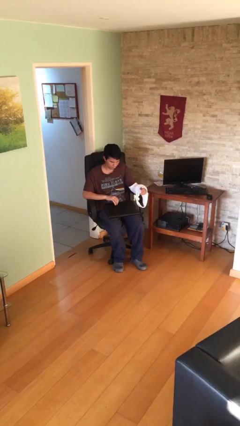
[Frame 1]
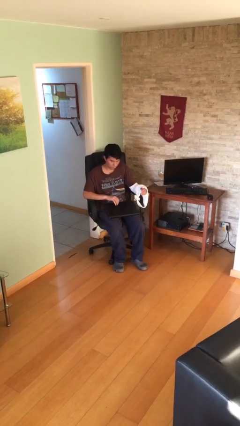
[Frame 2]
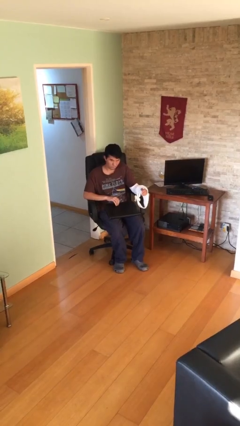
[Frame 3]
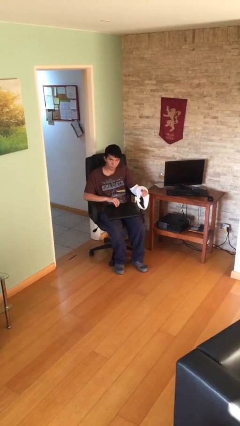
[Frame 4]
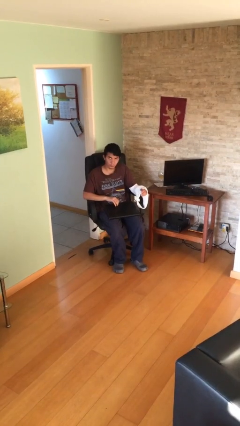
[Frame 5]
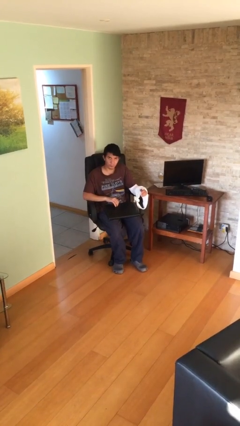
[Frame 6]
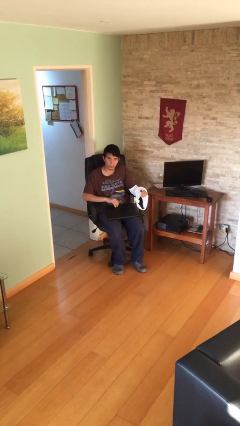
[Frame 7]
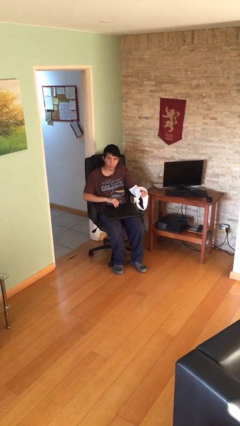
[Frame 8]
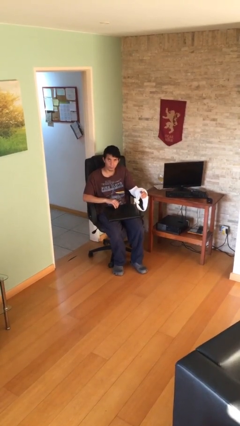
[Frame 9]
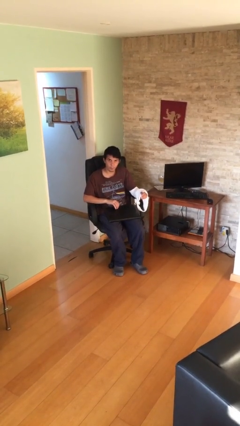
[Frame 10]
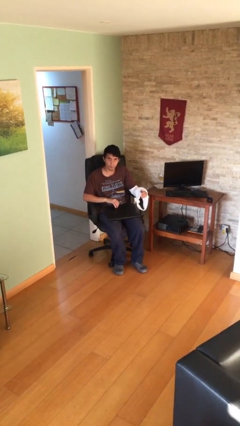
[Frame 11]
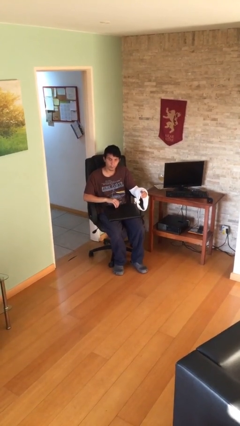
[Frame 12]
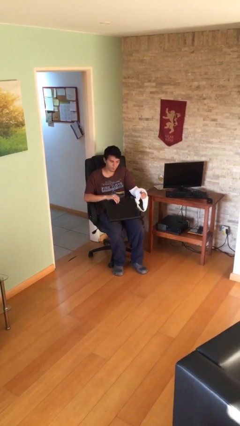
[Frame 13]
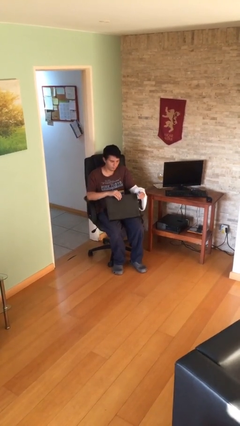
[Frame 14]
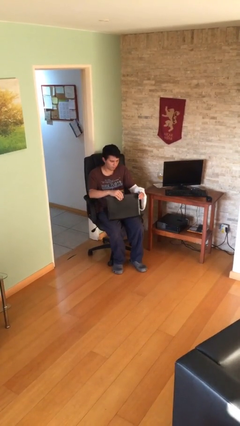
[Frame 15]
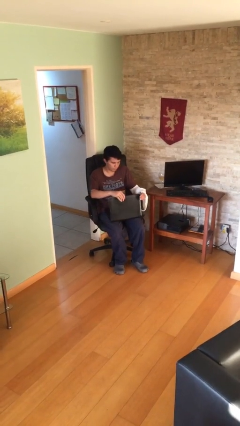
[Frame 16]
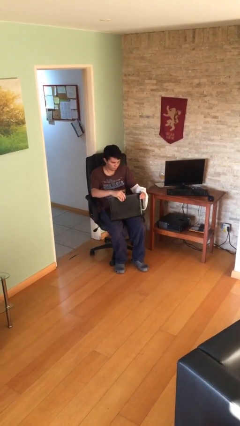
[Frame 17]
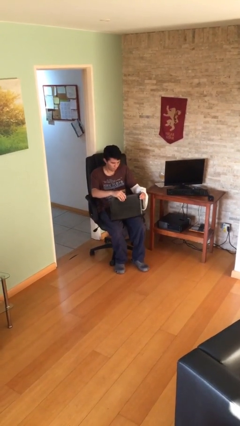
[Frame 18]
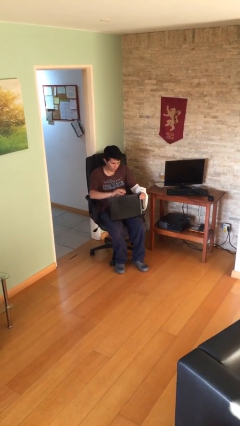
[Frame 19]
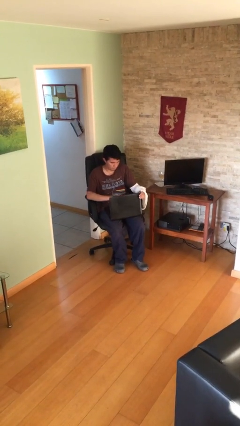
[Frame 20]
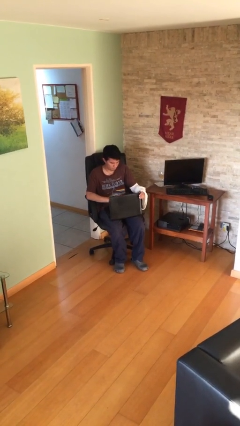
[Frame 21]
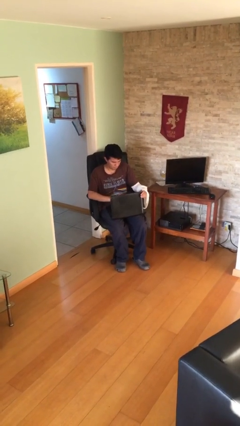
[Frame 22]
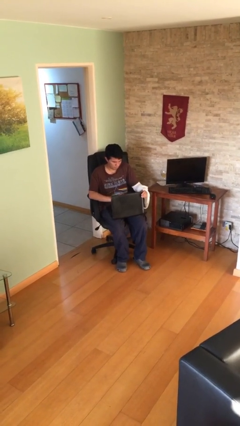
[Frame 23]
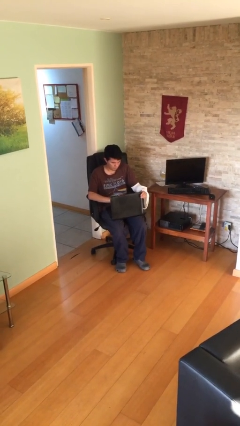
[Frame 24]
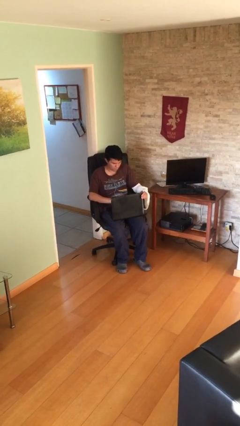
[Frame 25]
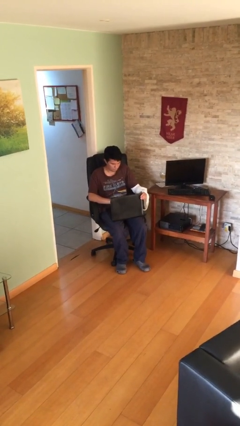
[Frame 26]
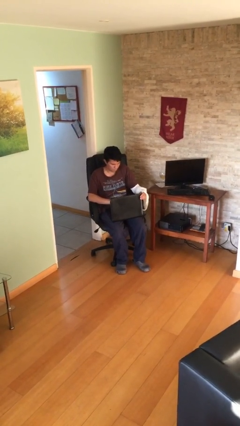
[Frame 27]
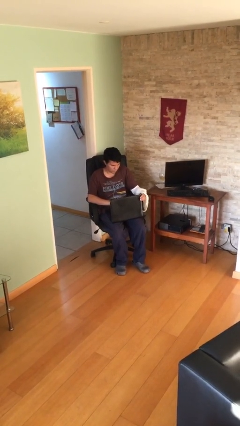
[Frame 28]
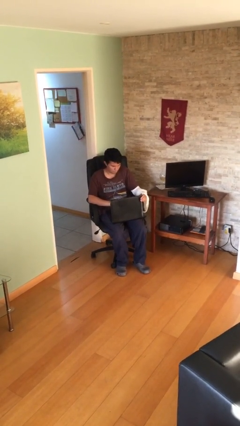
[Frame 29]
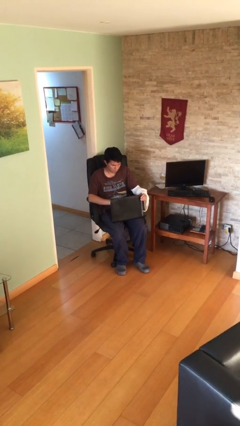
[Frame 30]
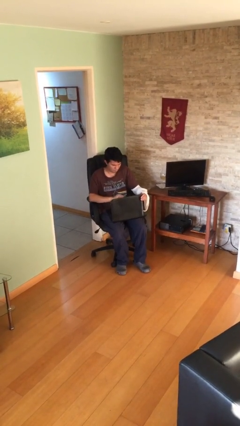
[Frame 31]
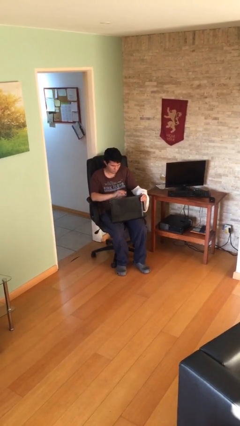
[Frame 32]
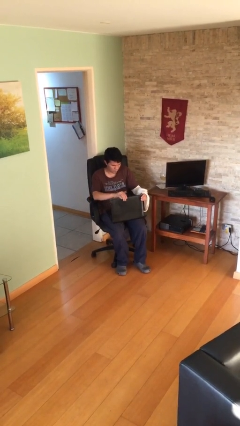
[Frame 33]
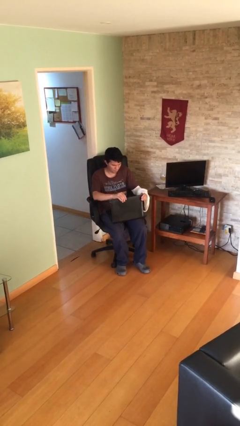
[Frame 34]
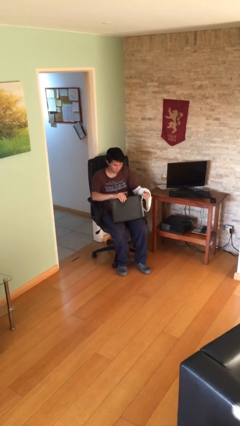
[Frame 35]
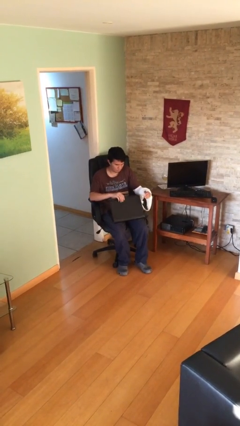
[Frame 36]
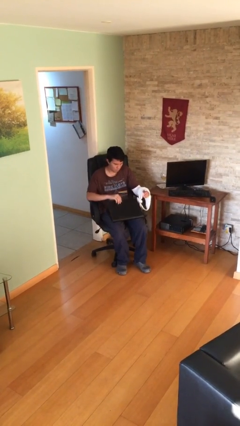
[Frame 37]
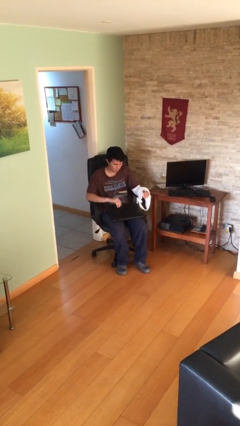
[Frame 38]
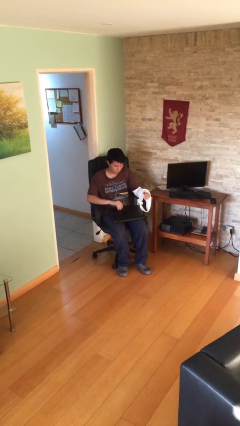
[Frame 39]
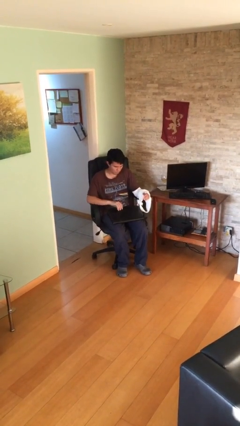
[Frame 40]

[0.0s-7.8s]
person interacts with laptop

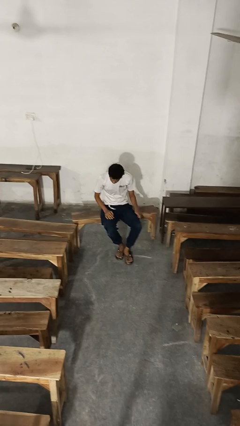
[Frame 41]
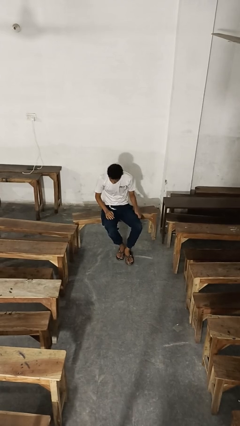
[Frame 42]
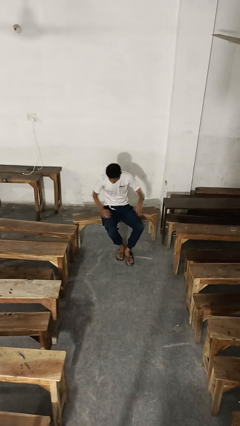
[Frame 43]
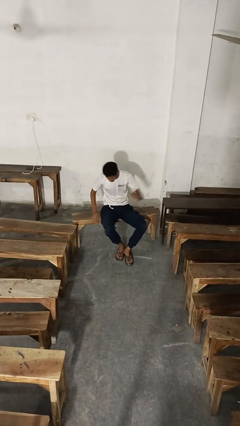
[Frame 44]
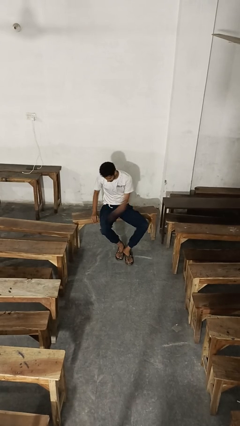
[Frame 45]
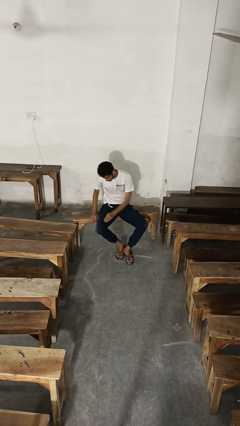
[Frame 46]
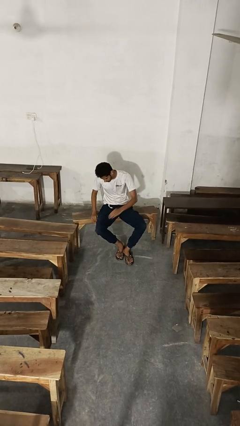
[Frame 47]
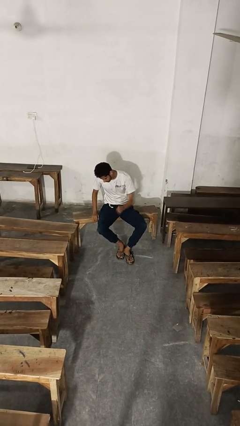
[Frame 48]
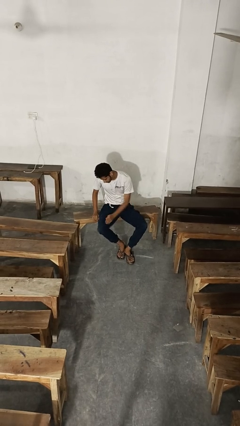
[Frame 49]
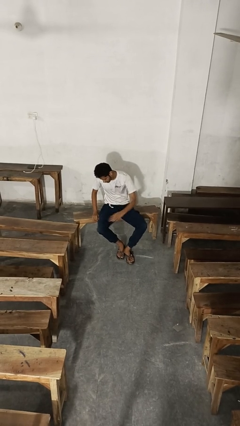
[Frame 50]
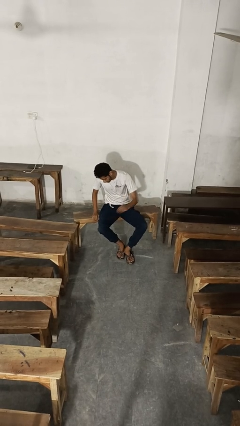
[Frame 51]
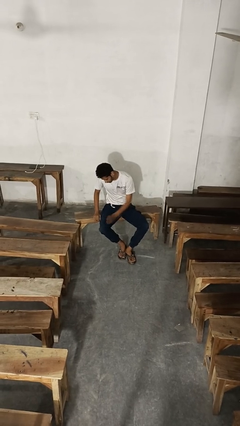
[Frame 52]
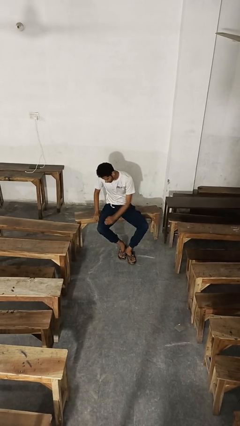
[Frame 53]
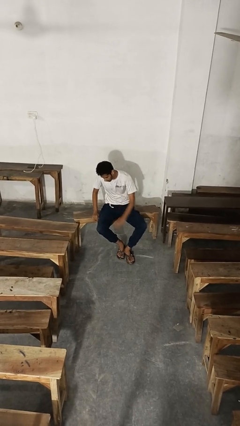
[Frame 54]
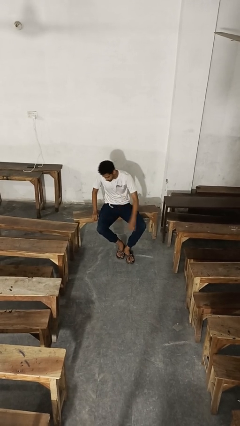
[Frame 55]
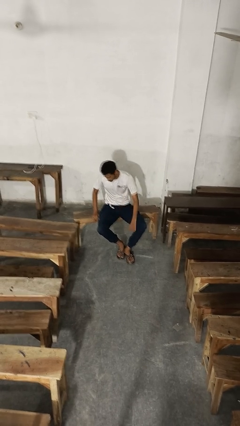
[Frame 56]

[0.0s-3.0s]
person slaps hands on thighs

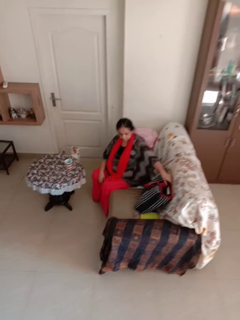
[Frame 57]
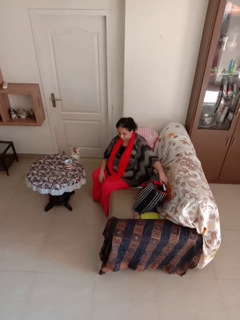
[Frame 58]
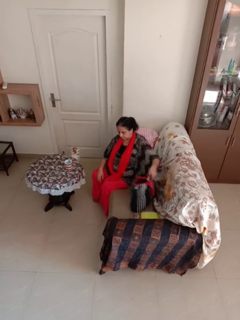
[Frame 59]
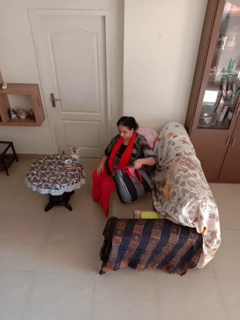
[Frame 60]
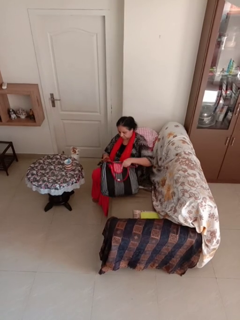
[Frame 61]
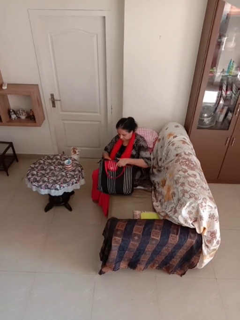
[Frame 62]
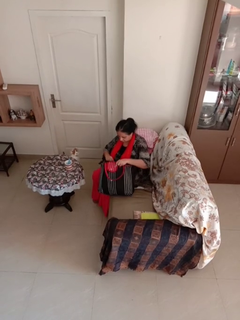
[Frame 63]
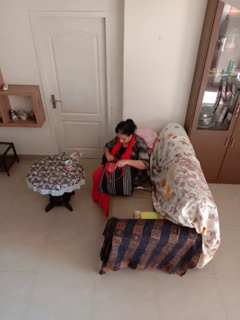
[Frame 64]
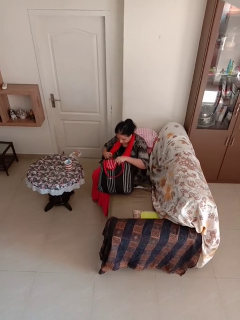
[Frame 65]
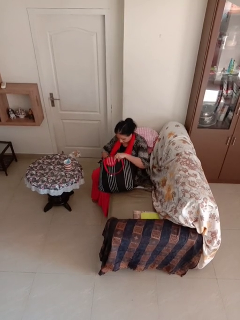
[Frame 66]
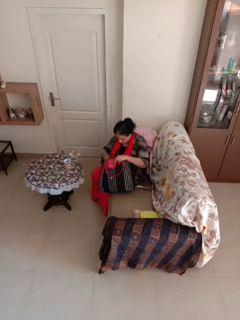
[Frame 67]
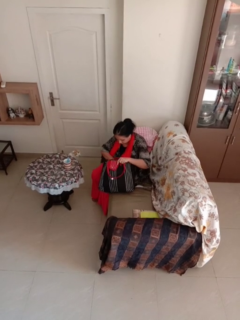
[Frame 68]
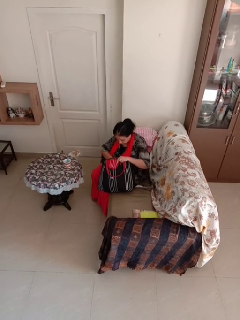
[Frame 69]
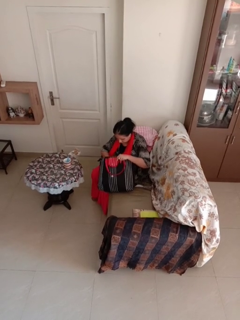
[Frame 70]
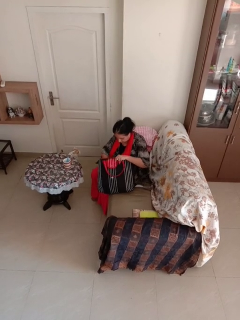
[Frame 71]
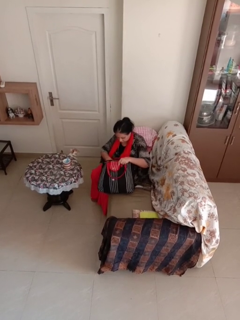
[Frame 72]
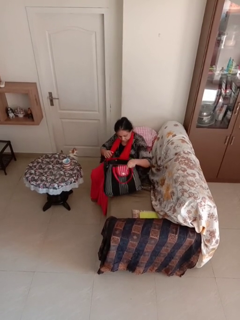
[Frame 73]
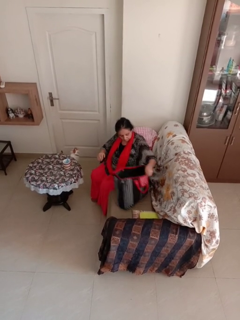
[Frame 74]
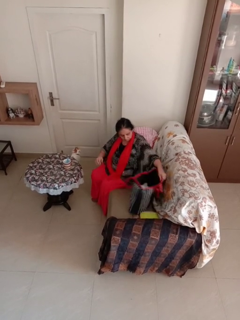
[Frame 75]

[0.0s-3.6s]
person searches in bag

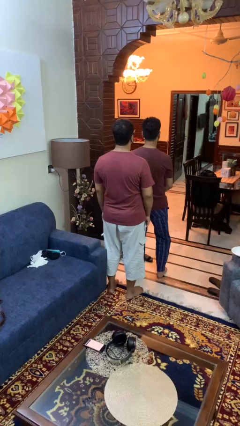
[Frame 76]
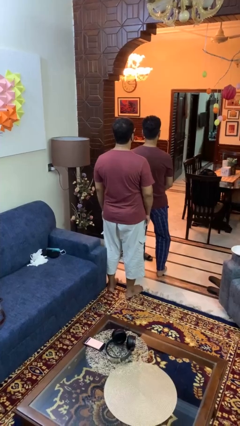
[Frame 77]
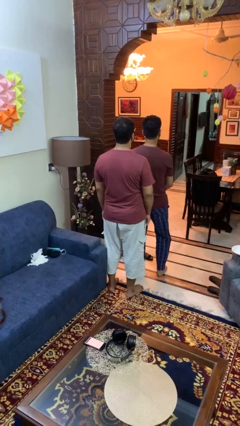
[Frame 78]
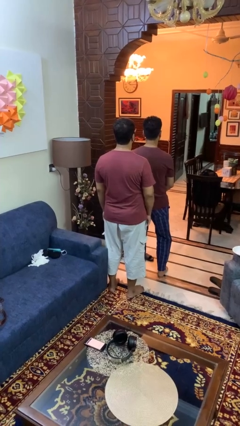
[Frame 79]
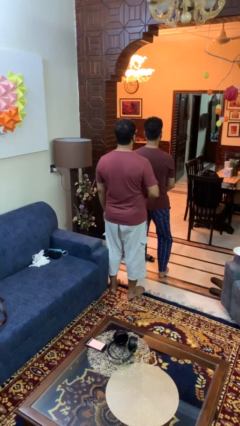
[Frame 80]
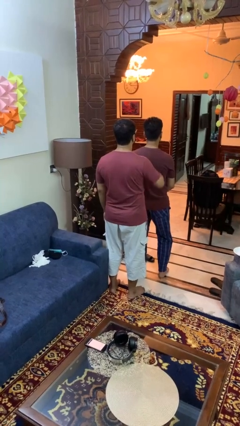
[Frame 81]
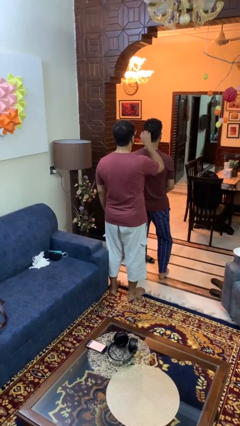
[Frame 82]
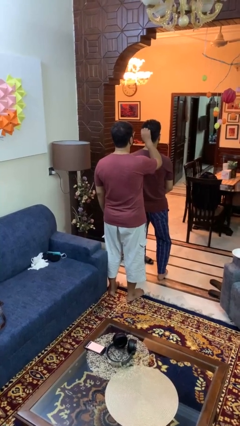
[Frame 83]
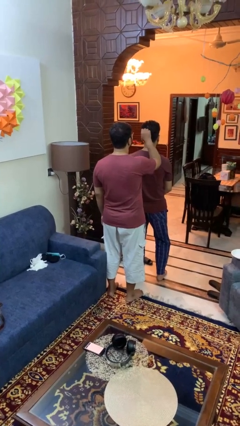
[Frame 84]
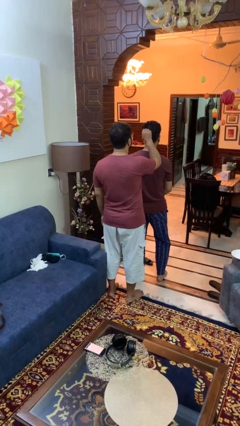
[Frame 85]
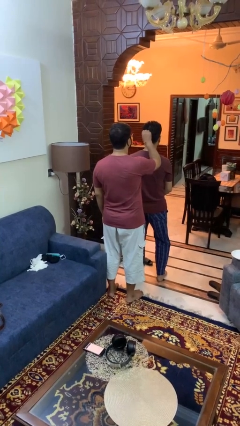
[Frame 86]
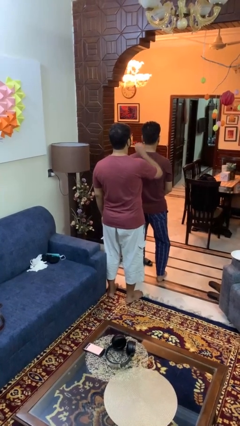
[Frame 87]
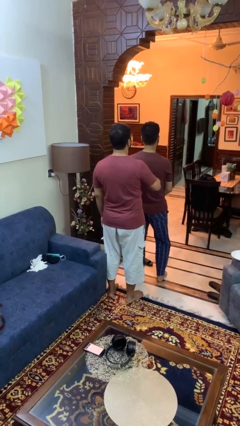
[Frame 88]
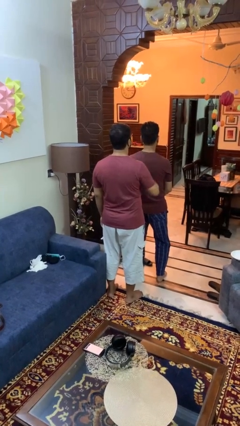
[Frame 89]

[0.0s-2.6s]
person grabs person by hair

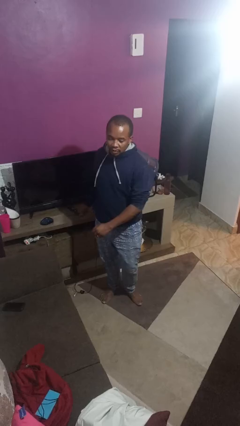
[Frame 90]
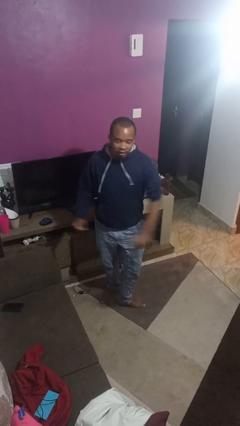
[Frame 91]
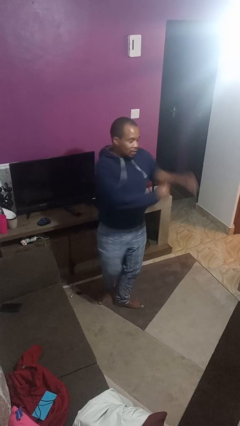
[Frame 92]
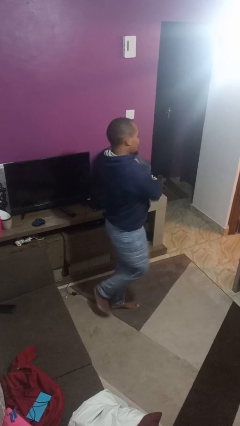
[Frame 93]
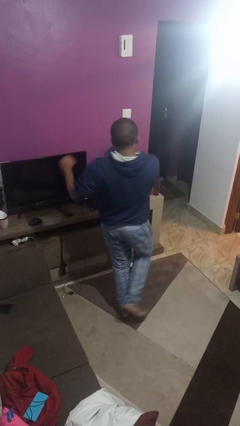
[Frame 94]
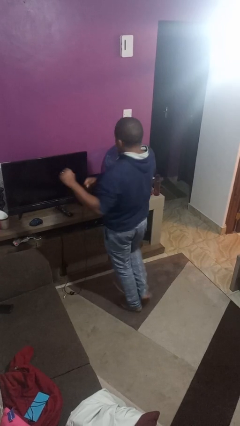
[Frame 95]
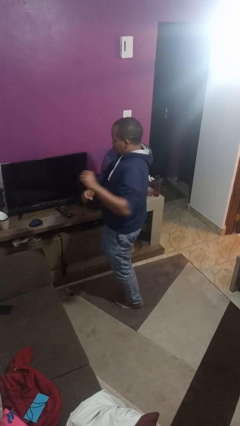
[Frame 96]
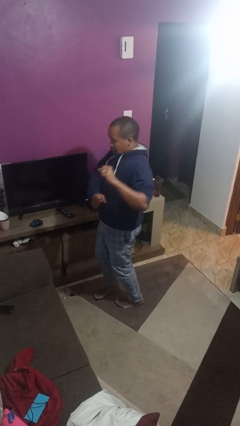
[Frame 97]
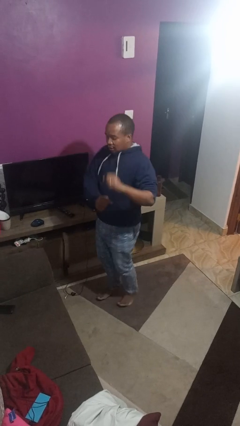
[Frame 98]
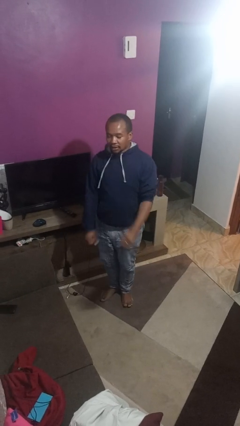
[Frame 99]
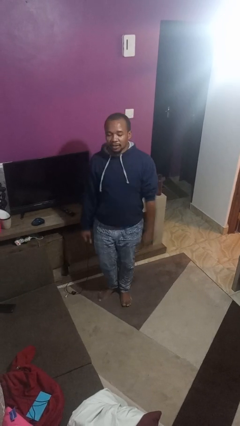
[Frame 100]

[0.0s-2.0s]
person twirls
